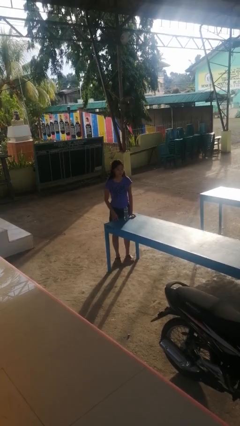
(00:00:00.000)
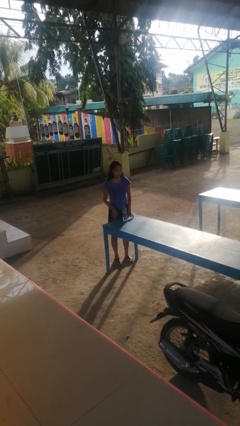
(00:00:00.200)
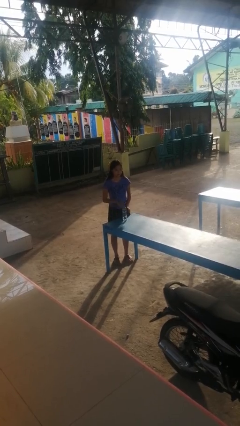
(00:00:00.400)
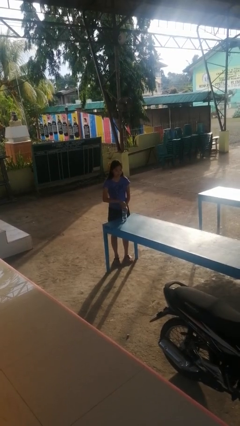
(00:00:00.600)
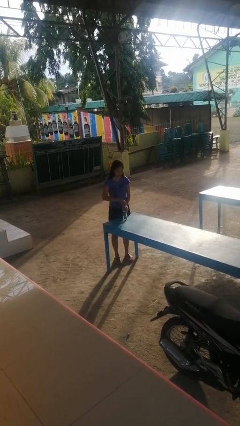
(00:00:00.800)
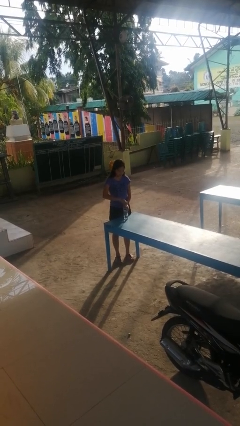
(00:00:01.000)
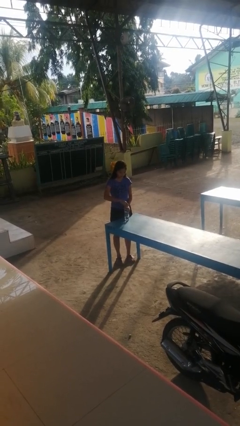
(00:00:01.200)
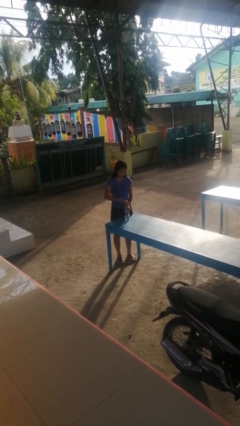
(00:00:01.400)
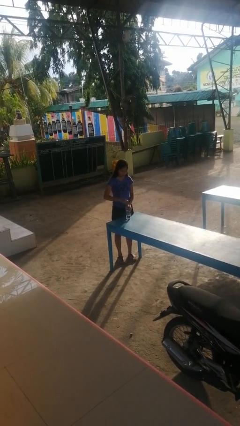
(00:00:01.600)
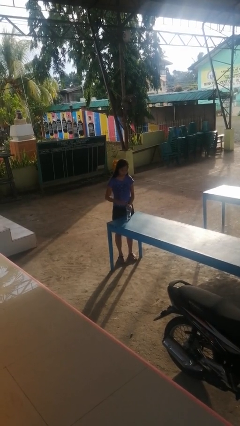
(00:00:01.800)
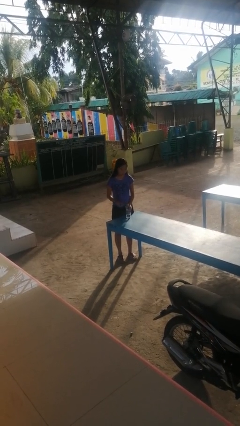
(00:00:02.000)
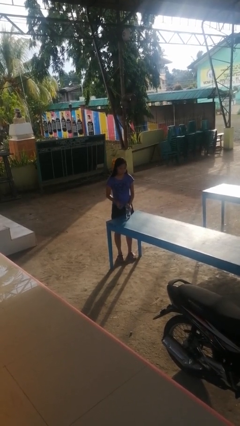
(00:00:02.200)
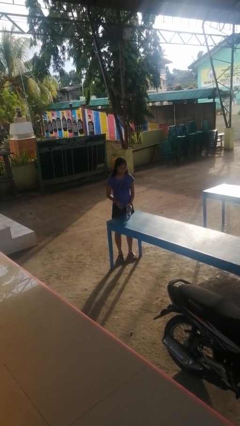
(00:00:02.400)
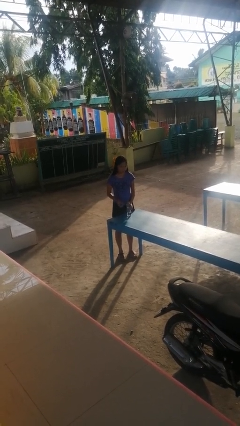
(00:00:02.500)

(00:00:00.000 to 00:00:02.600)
person unscrews lid from bottle

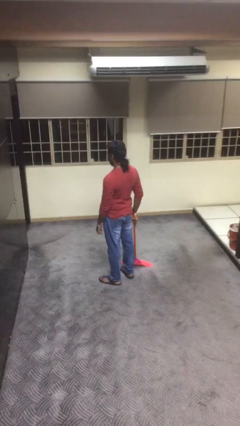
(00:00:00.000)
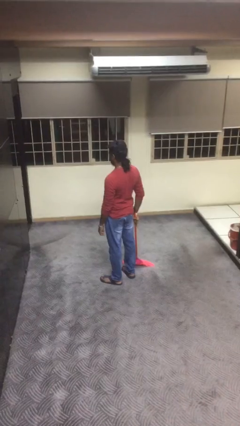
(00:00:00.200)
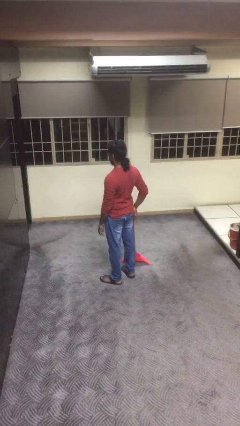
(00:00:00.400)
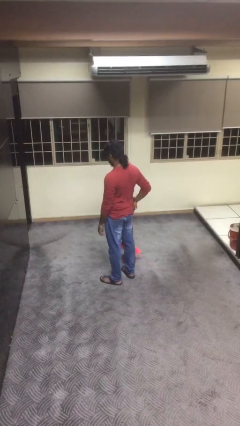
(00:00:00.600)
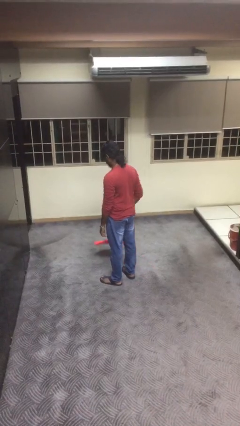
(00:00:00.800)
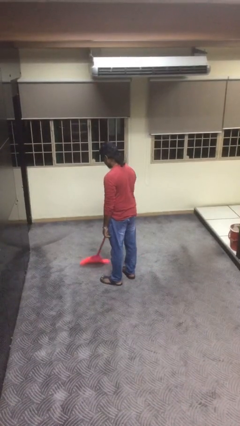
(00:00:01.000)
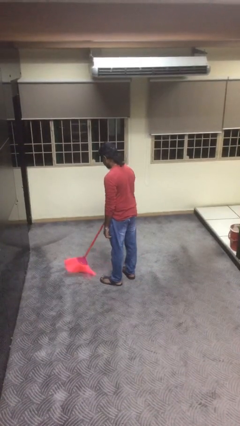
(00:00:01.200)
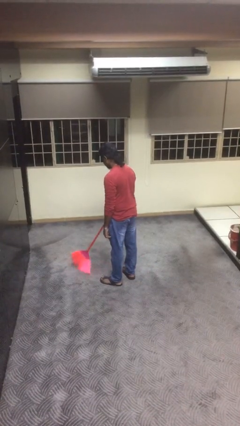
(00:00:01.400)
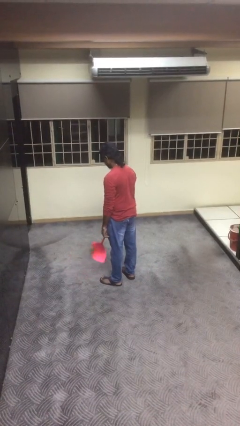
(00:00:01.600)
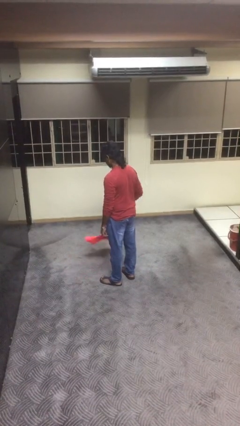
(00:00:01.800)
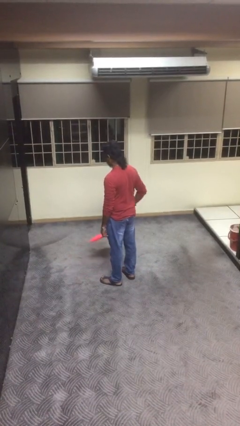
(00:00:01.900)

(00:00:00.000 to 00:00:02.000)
person sweeps floor

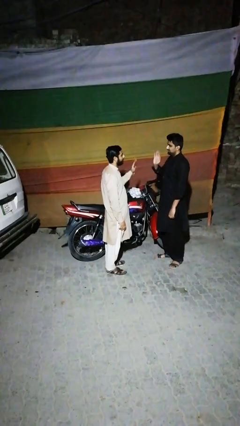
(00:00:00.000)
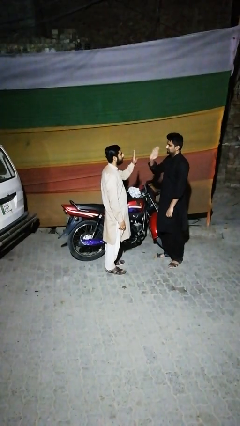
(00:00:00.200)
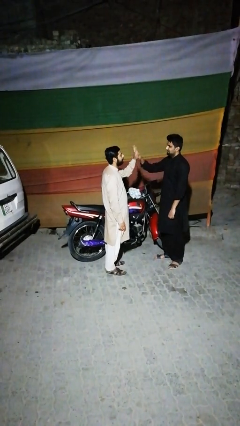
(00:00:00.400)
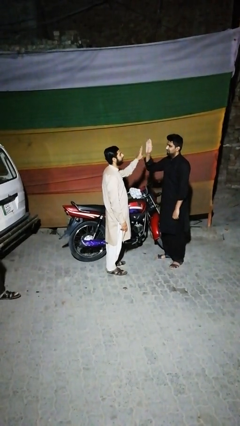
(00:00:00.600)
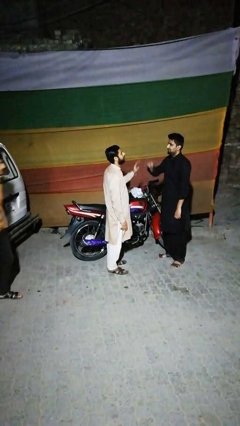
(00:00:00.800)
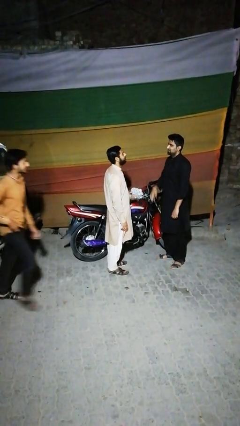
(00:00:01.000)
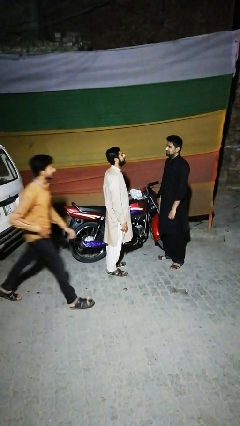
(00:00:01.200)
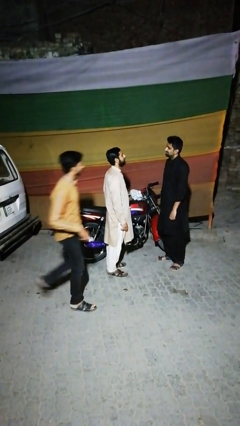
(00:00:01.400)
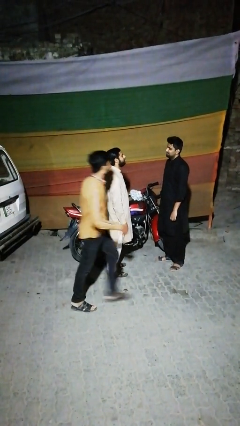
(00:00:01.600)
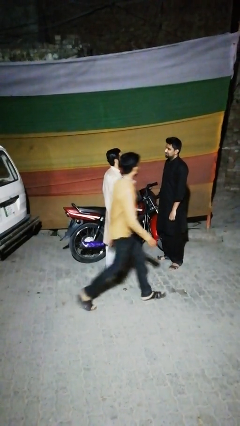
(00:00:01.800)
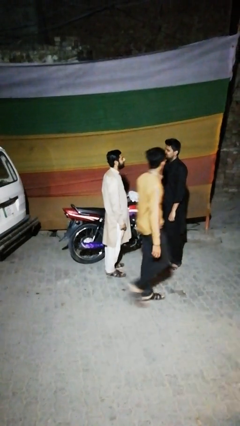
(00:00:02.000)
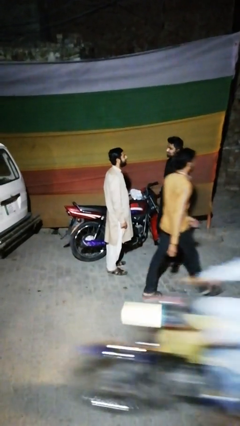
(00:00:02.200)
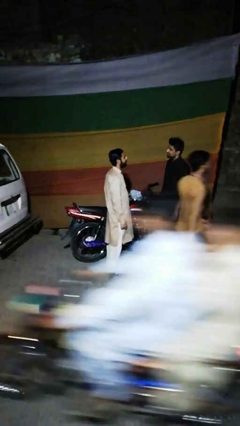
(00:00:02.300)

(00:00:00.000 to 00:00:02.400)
person highfives hand

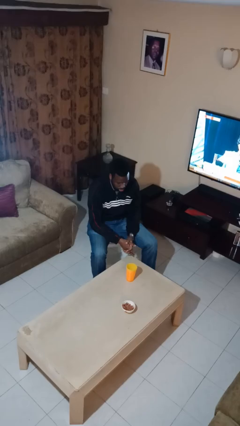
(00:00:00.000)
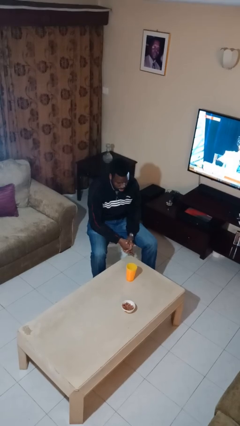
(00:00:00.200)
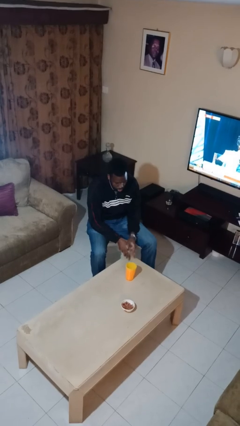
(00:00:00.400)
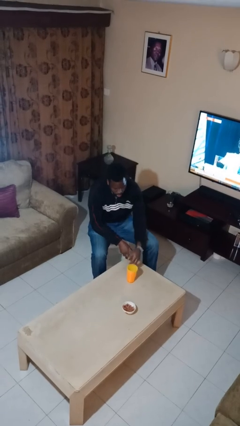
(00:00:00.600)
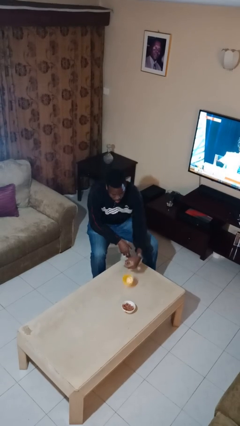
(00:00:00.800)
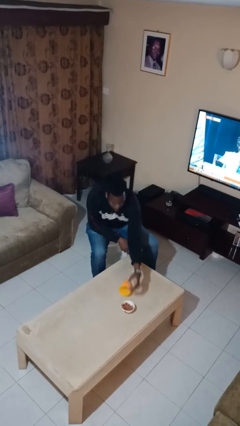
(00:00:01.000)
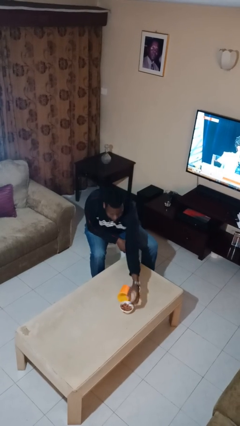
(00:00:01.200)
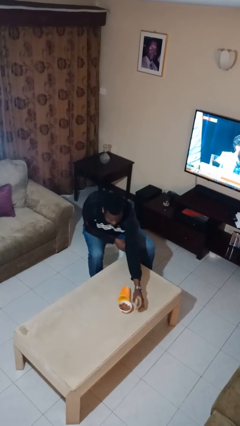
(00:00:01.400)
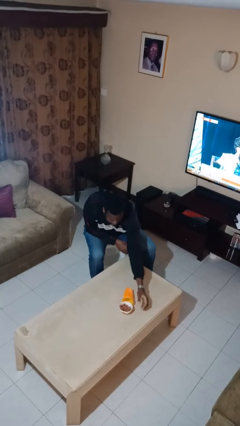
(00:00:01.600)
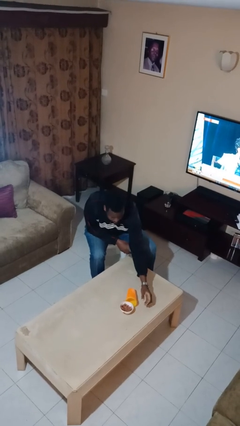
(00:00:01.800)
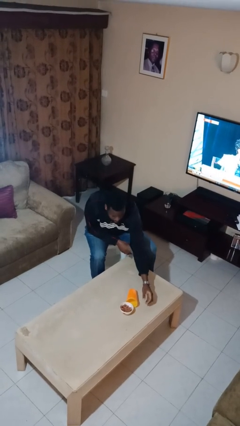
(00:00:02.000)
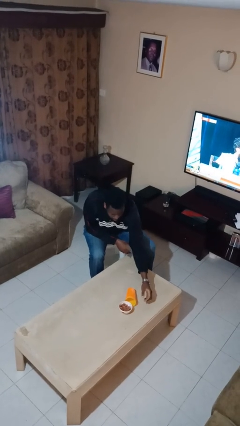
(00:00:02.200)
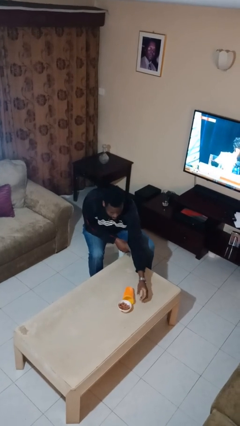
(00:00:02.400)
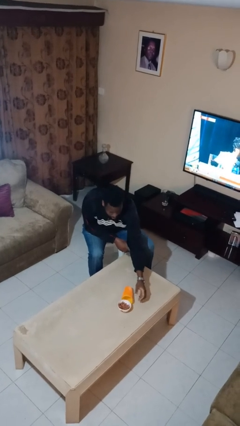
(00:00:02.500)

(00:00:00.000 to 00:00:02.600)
person knocks over glass

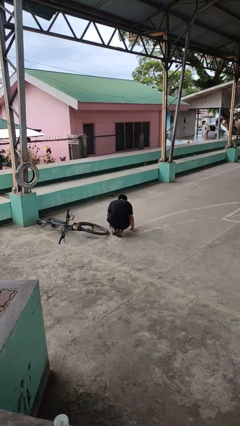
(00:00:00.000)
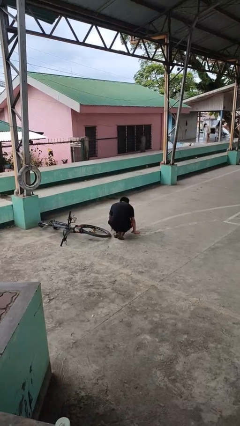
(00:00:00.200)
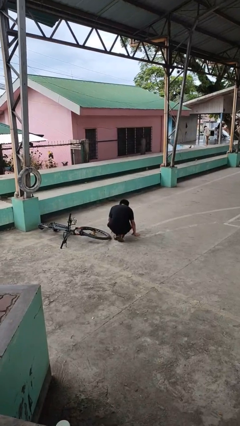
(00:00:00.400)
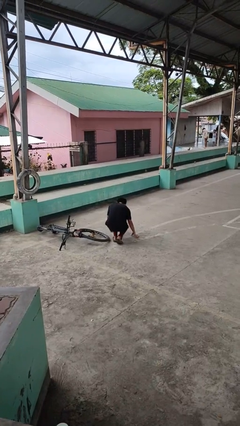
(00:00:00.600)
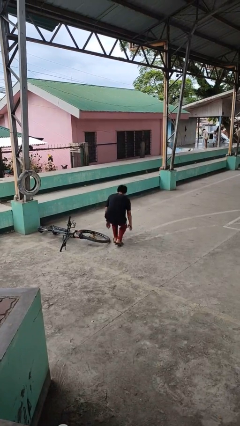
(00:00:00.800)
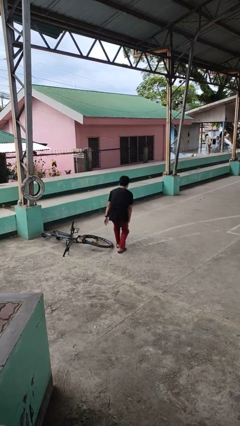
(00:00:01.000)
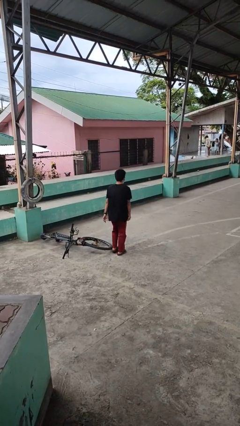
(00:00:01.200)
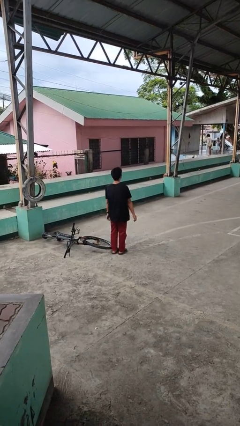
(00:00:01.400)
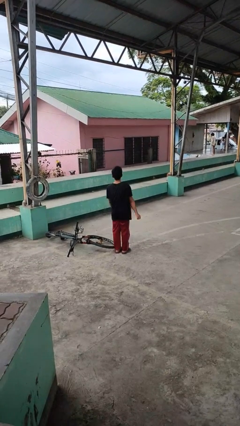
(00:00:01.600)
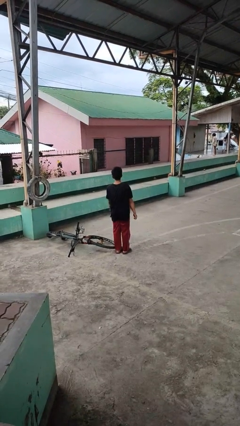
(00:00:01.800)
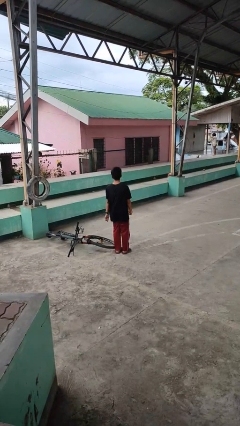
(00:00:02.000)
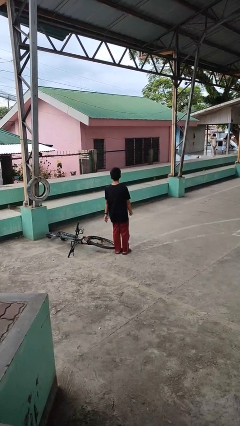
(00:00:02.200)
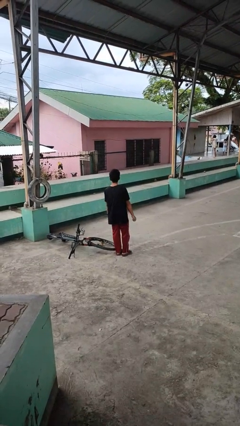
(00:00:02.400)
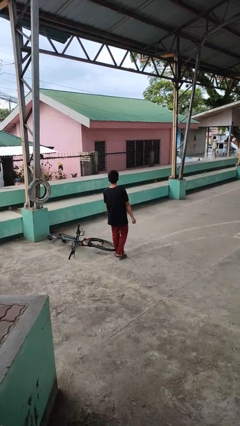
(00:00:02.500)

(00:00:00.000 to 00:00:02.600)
person picks up object from floor

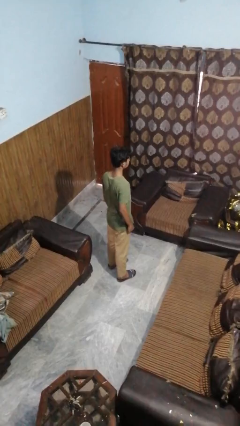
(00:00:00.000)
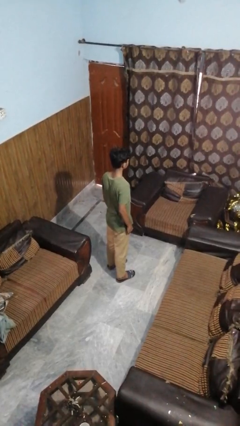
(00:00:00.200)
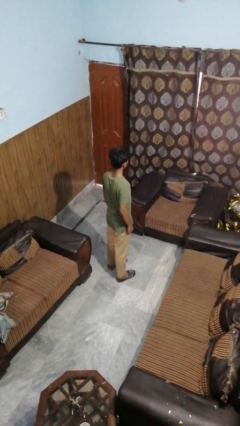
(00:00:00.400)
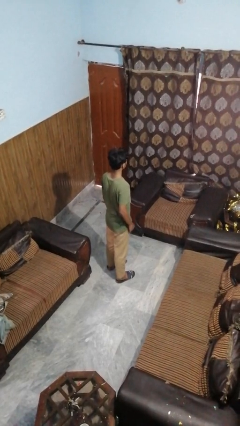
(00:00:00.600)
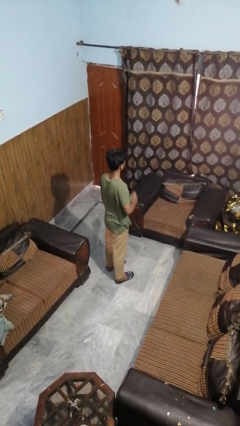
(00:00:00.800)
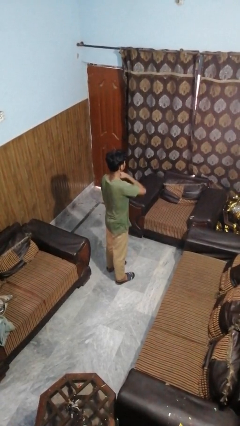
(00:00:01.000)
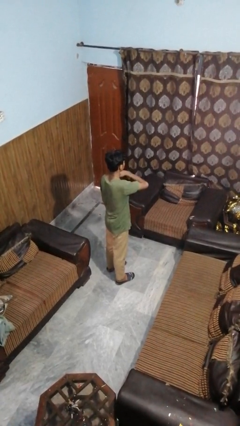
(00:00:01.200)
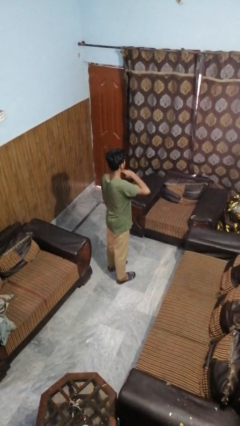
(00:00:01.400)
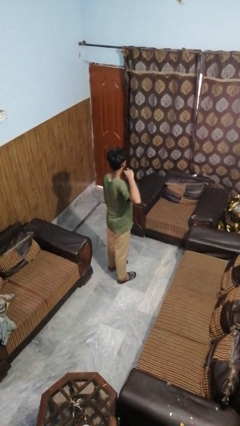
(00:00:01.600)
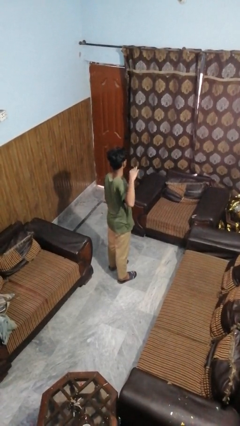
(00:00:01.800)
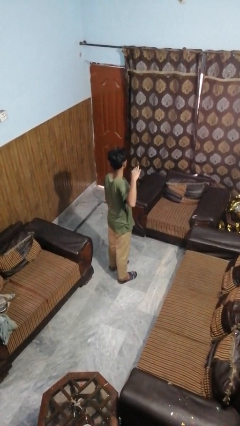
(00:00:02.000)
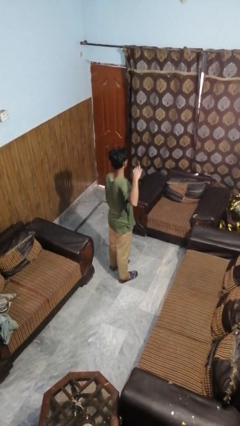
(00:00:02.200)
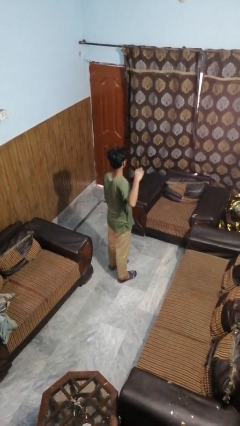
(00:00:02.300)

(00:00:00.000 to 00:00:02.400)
person gestures cut

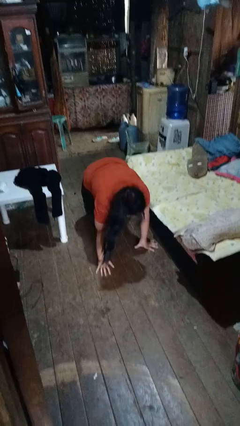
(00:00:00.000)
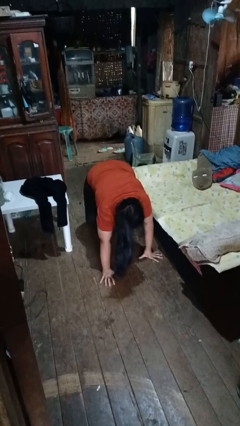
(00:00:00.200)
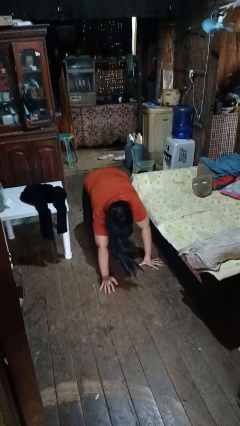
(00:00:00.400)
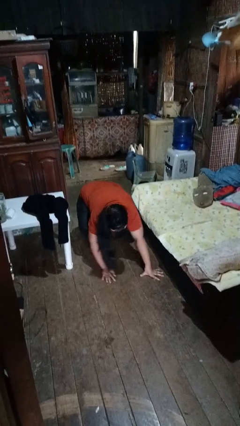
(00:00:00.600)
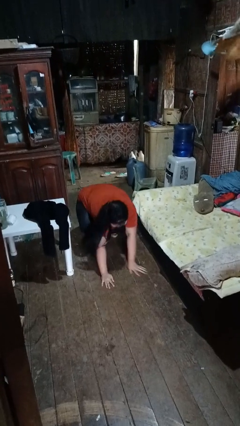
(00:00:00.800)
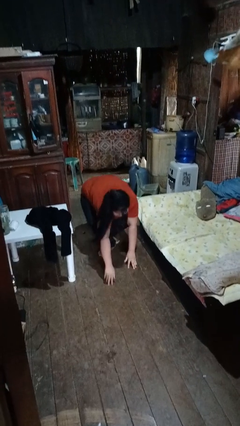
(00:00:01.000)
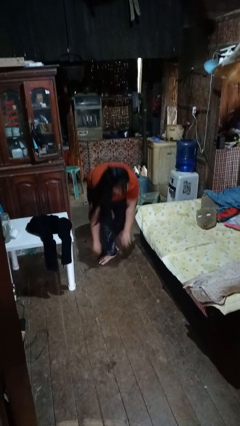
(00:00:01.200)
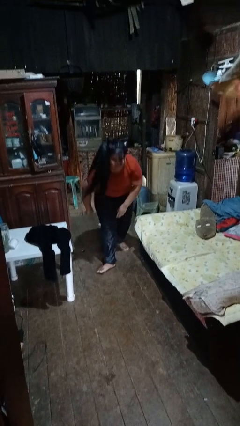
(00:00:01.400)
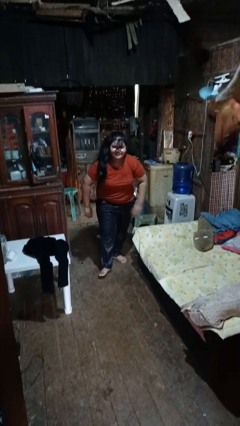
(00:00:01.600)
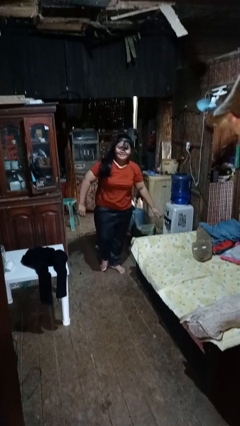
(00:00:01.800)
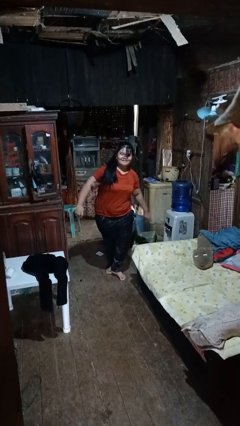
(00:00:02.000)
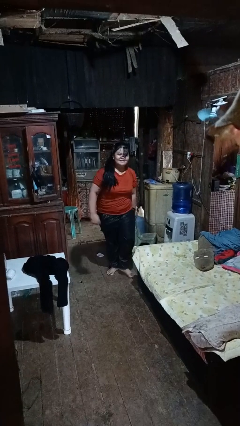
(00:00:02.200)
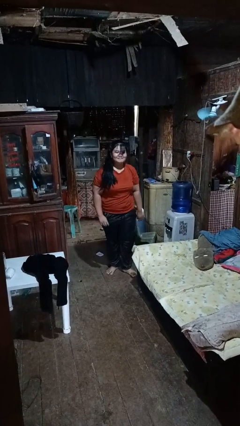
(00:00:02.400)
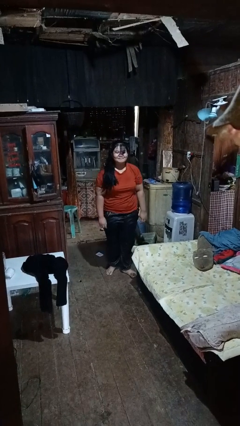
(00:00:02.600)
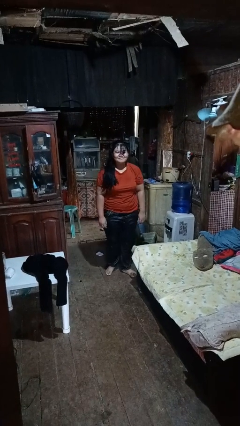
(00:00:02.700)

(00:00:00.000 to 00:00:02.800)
person stands up from floor
